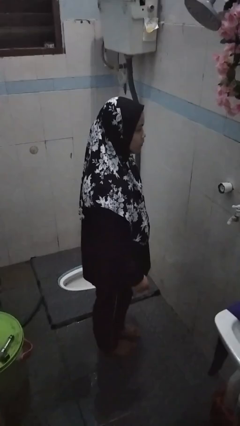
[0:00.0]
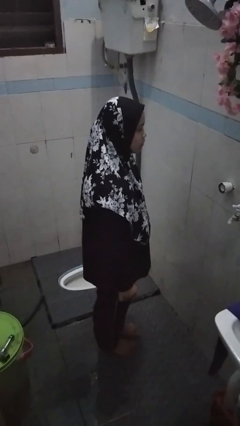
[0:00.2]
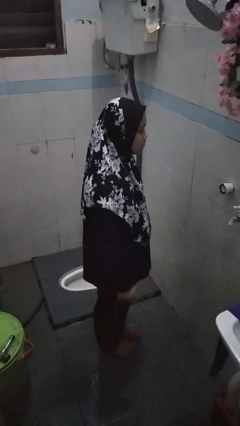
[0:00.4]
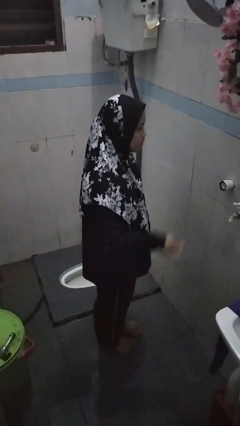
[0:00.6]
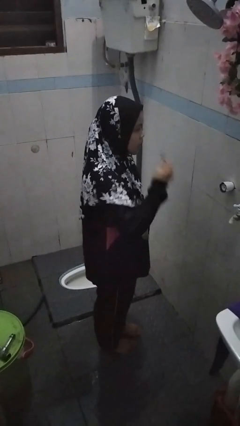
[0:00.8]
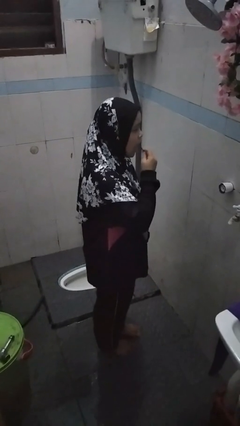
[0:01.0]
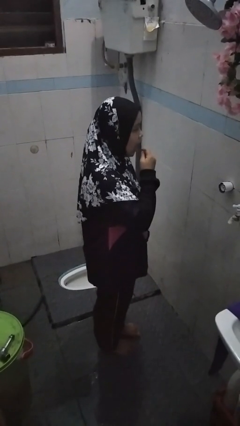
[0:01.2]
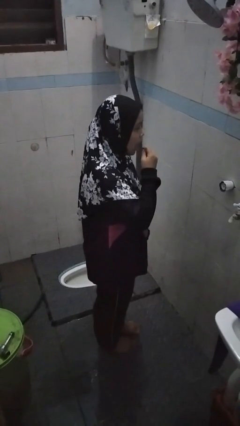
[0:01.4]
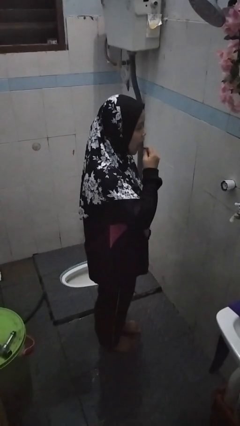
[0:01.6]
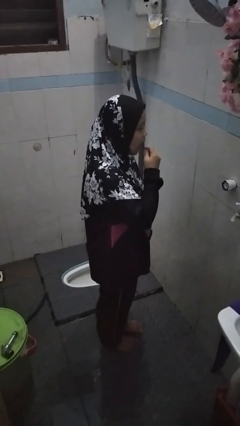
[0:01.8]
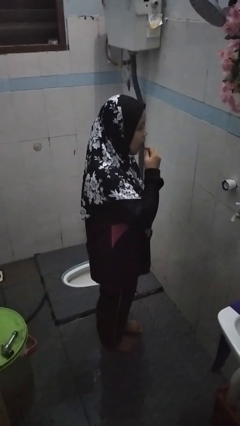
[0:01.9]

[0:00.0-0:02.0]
person flosses

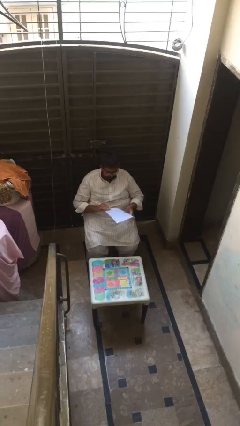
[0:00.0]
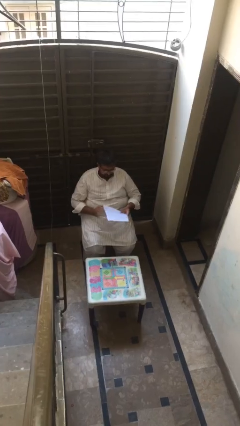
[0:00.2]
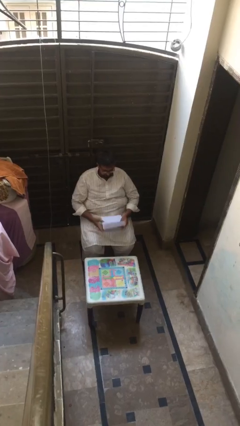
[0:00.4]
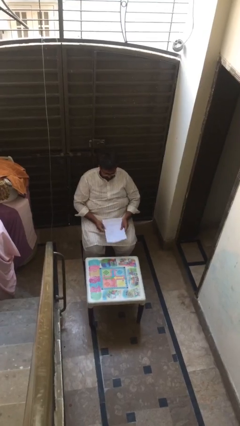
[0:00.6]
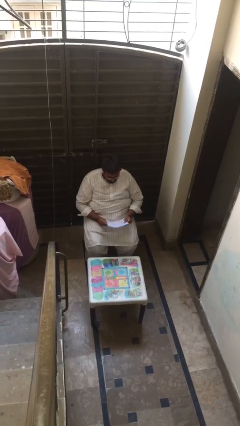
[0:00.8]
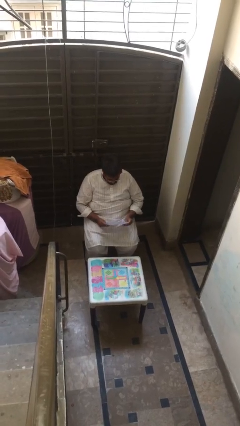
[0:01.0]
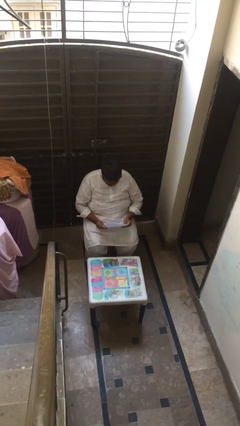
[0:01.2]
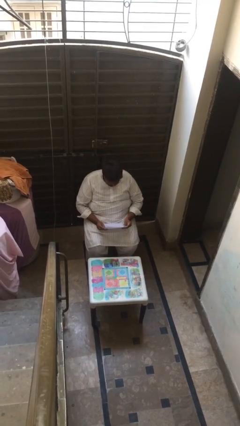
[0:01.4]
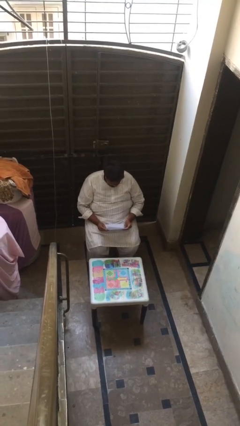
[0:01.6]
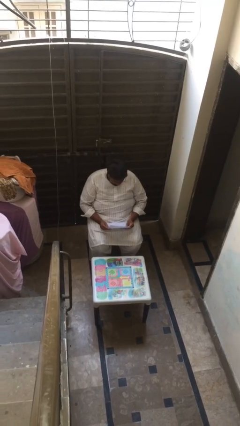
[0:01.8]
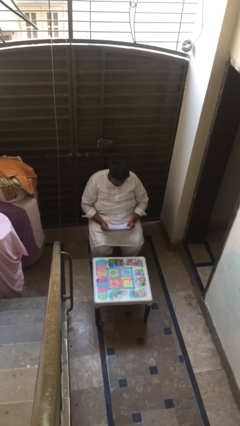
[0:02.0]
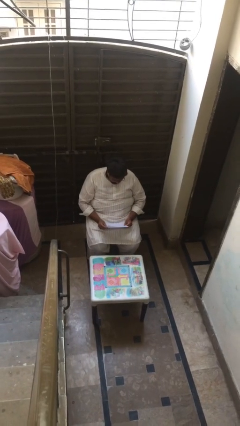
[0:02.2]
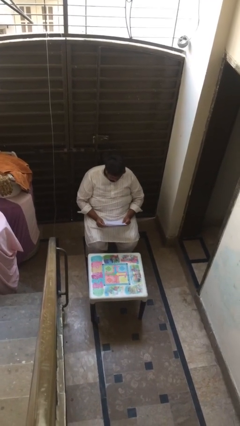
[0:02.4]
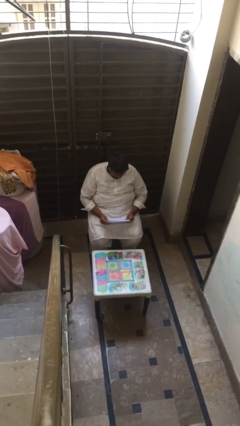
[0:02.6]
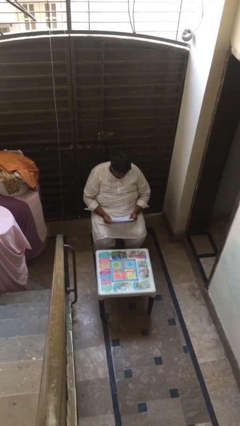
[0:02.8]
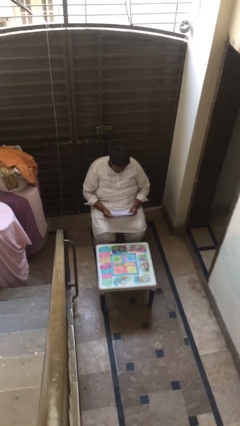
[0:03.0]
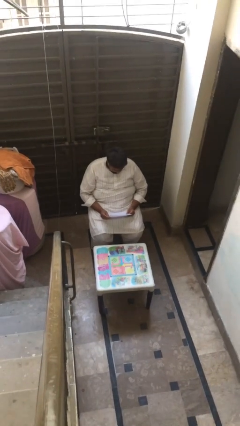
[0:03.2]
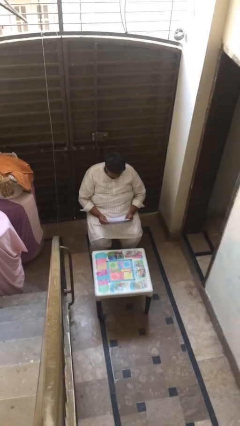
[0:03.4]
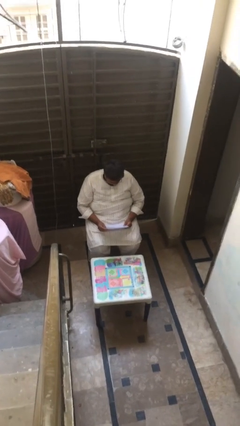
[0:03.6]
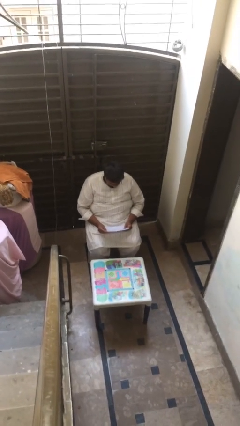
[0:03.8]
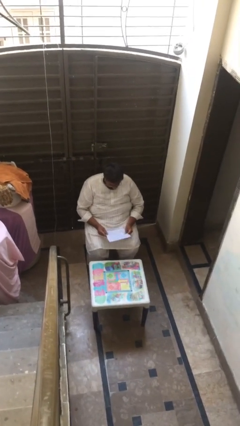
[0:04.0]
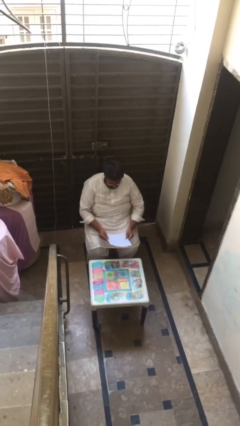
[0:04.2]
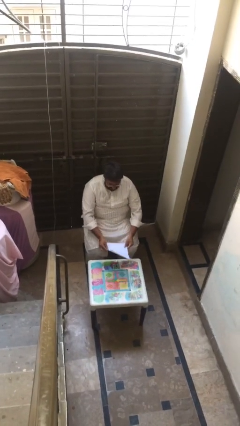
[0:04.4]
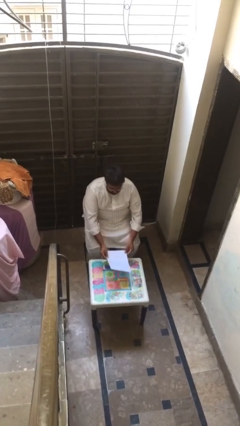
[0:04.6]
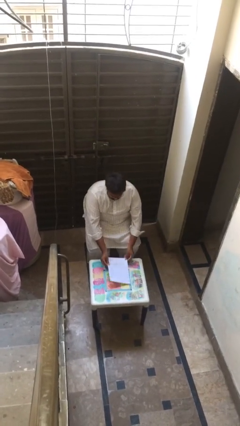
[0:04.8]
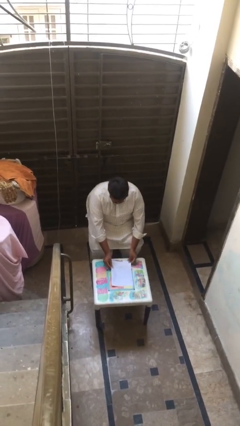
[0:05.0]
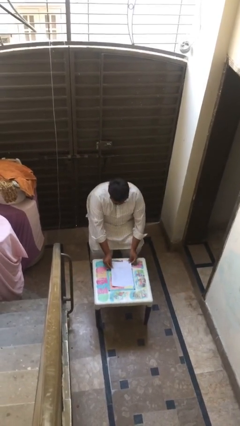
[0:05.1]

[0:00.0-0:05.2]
person reads document

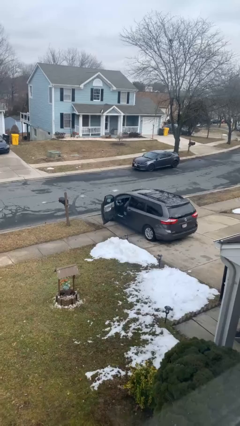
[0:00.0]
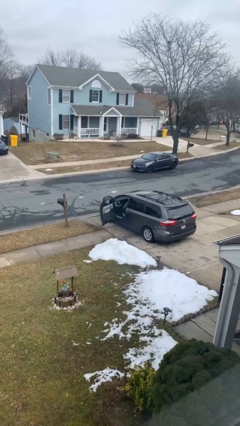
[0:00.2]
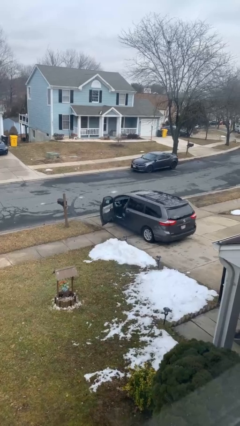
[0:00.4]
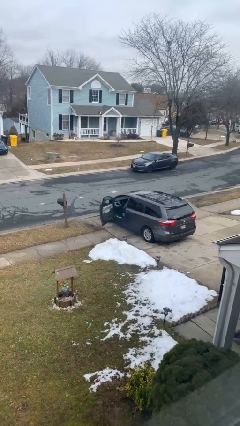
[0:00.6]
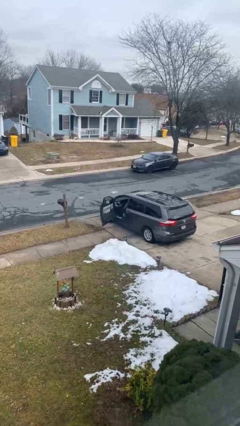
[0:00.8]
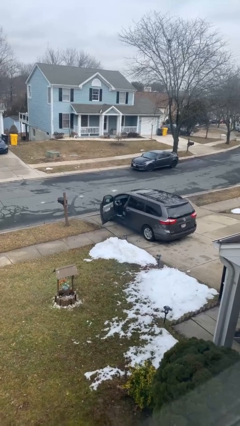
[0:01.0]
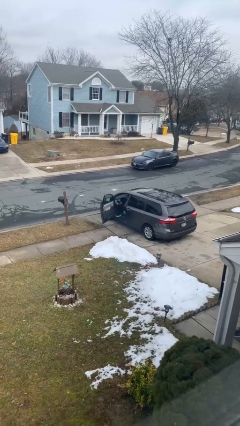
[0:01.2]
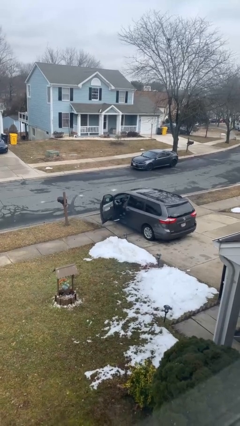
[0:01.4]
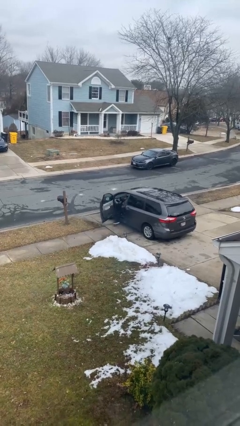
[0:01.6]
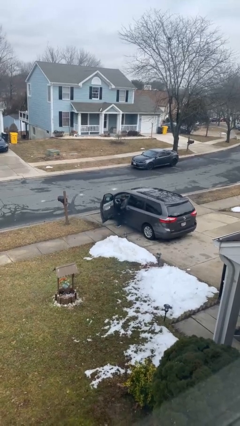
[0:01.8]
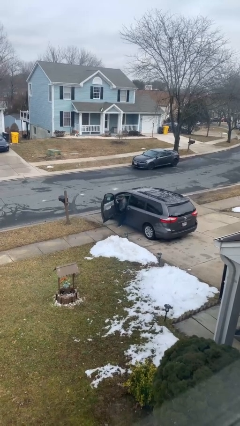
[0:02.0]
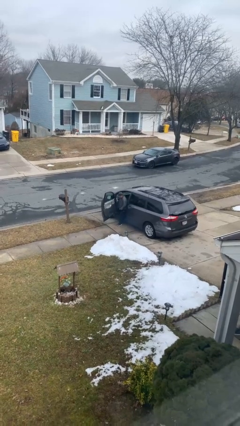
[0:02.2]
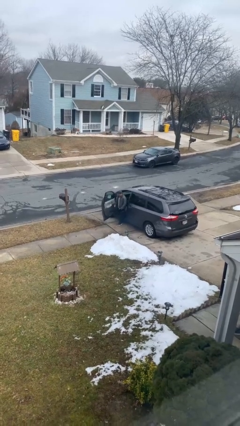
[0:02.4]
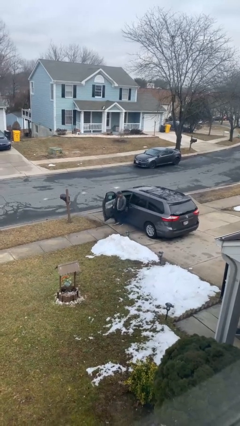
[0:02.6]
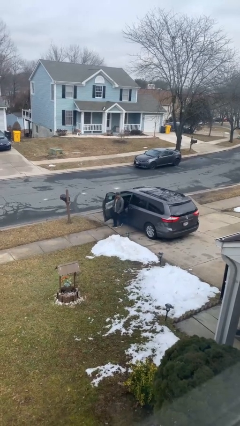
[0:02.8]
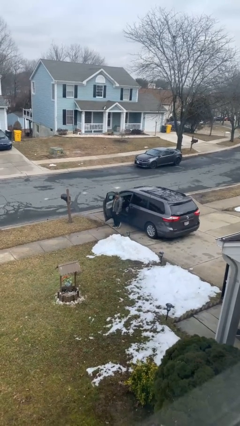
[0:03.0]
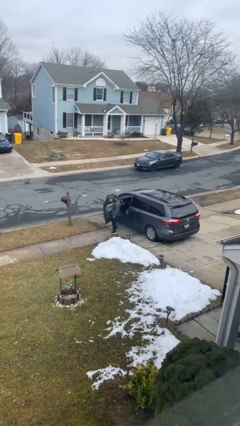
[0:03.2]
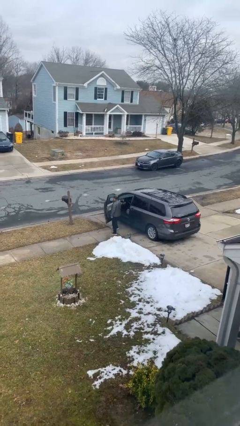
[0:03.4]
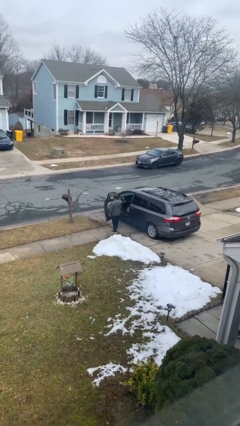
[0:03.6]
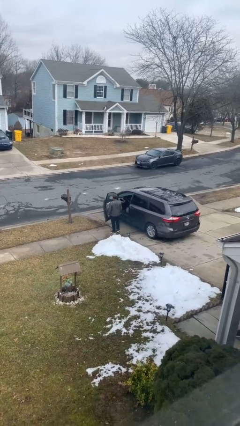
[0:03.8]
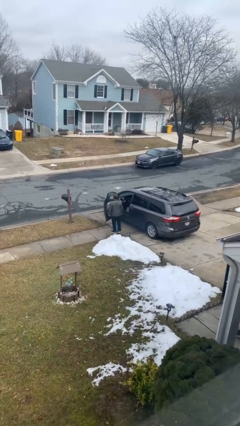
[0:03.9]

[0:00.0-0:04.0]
person exits car

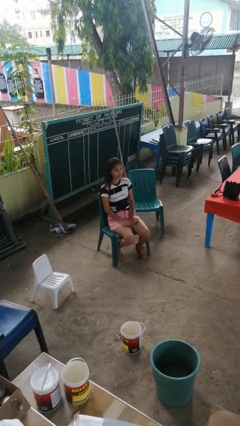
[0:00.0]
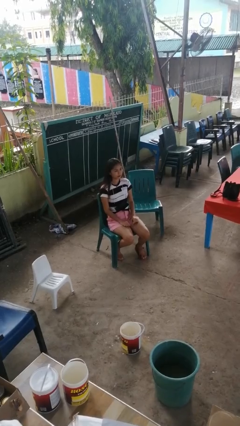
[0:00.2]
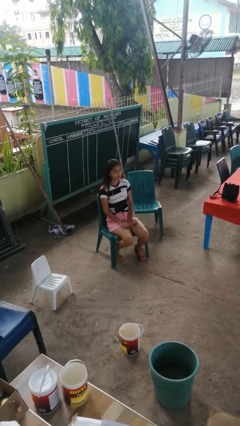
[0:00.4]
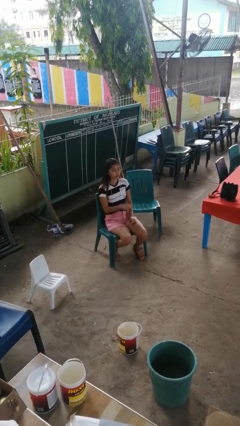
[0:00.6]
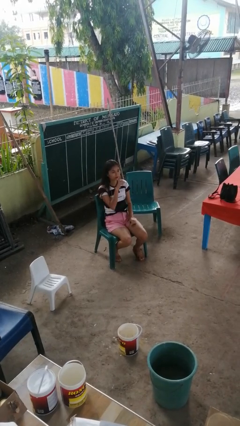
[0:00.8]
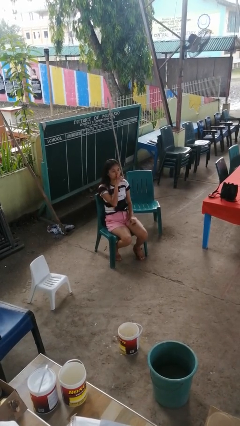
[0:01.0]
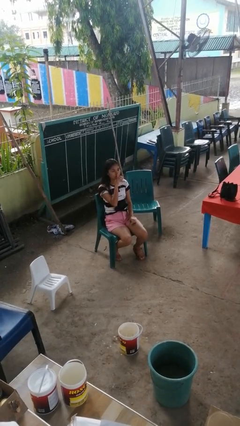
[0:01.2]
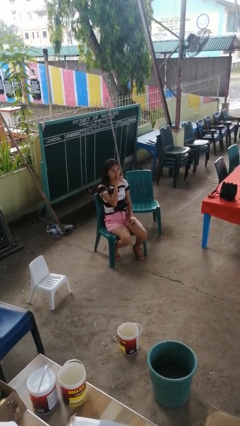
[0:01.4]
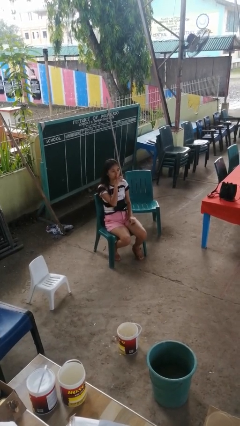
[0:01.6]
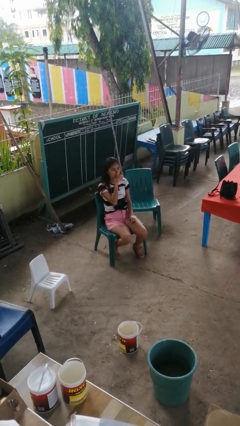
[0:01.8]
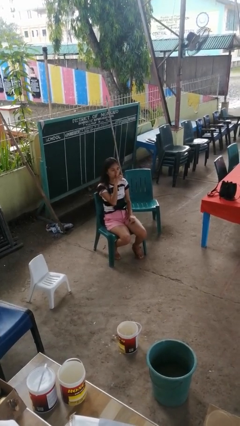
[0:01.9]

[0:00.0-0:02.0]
person gestures be quiet

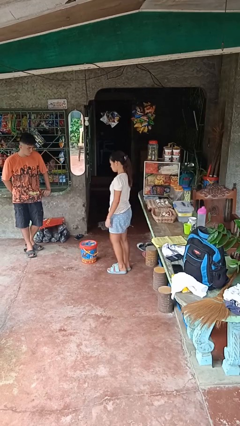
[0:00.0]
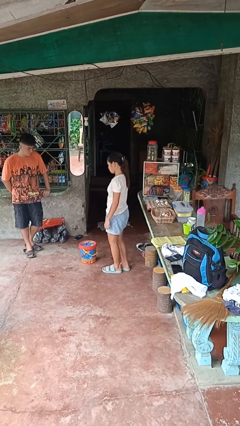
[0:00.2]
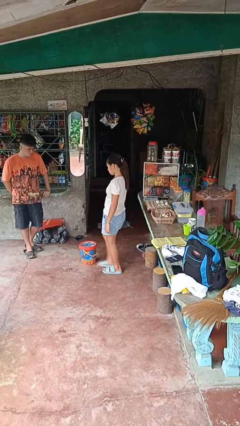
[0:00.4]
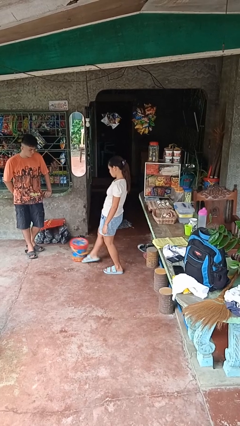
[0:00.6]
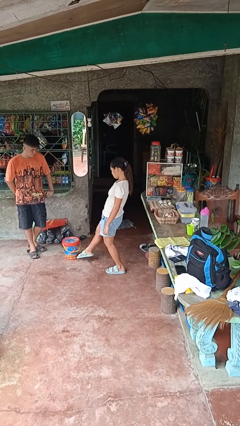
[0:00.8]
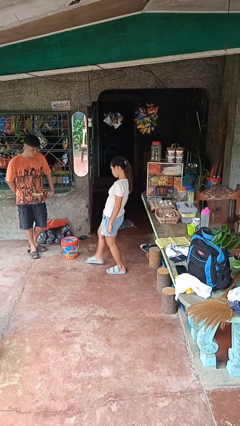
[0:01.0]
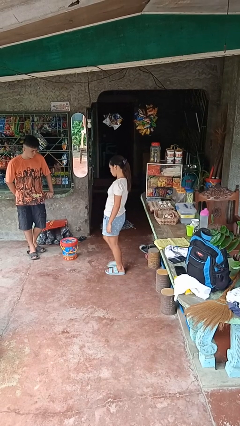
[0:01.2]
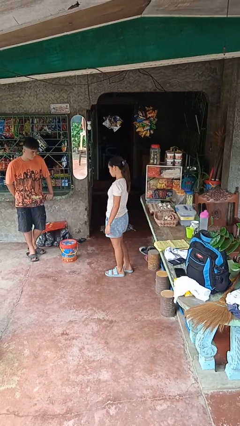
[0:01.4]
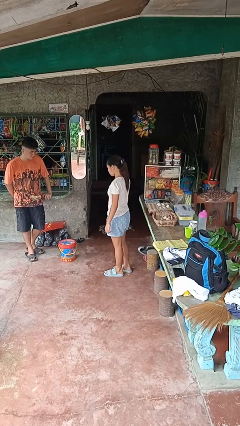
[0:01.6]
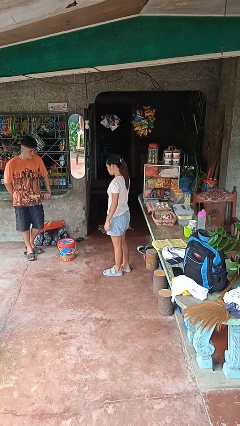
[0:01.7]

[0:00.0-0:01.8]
person kicks object to person

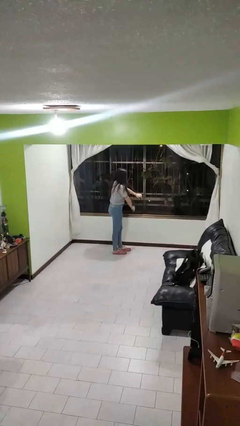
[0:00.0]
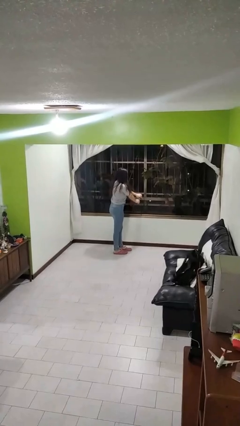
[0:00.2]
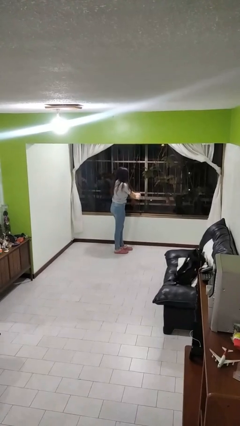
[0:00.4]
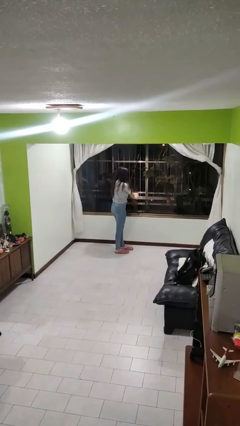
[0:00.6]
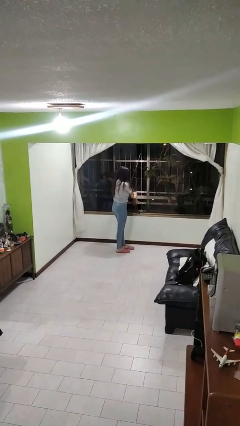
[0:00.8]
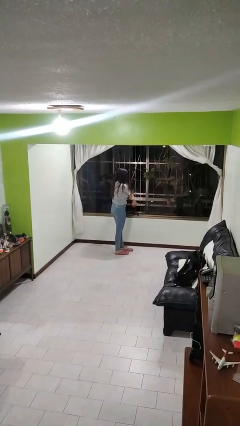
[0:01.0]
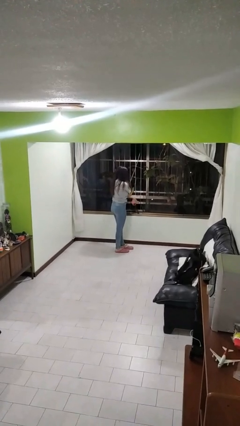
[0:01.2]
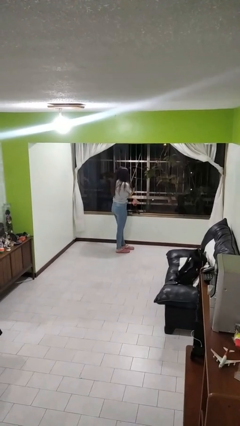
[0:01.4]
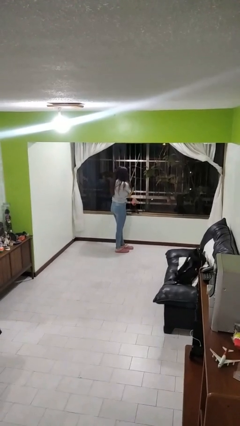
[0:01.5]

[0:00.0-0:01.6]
person opens home window

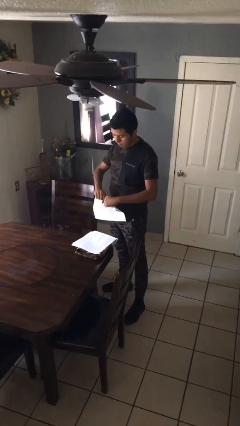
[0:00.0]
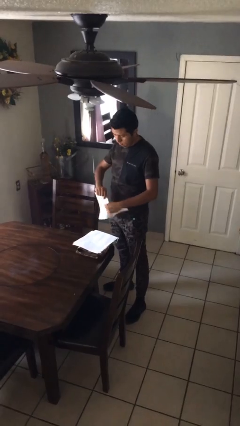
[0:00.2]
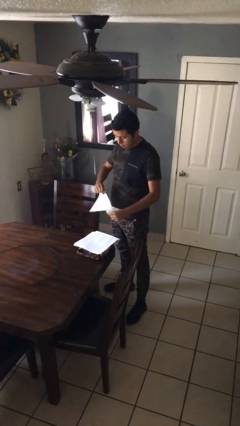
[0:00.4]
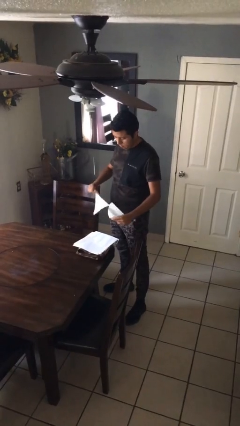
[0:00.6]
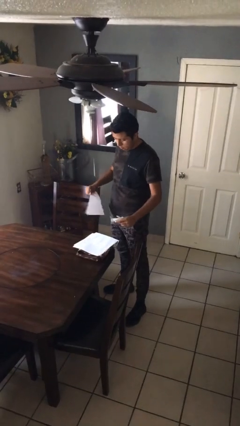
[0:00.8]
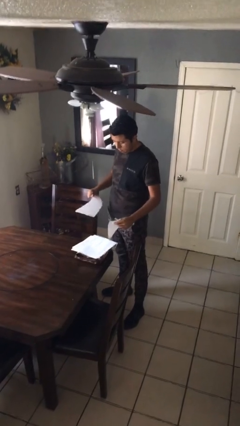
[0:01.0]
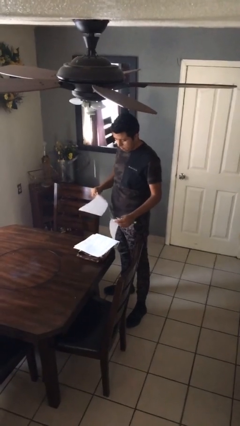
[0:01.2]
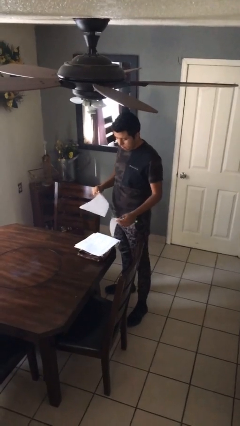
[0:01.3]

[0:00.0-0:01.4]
person tears paper
